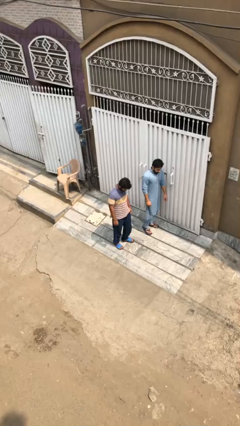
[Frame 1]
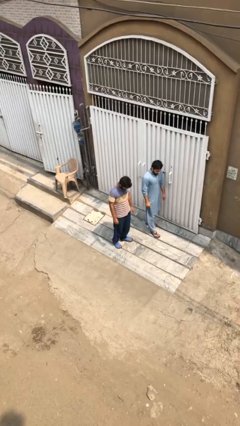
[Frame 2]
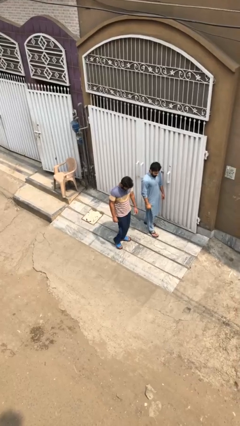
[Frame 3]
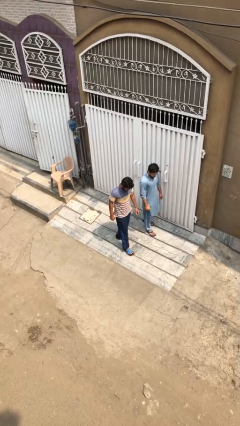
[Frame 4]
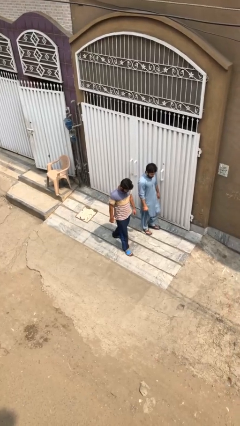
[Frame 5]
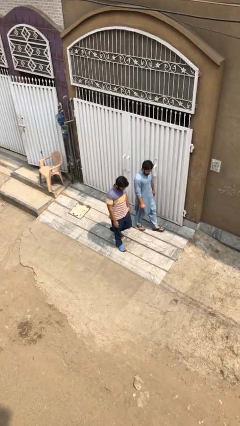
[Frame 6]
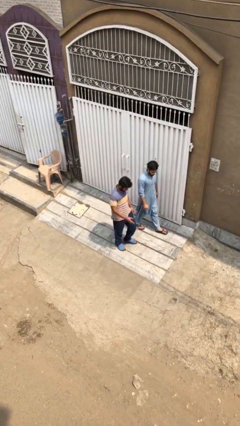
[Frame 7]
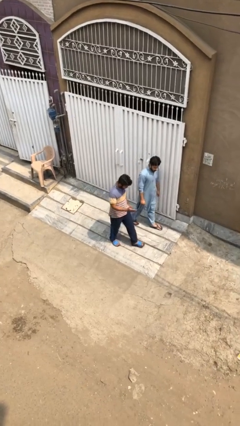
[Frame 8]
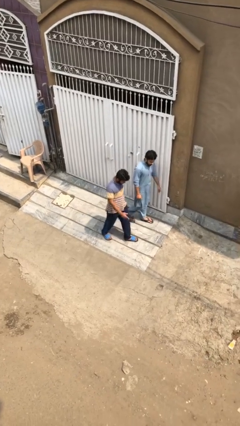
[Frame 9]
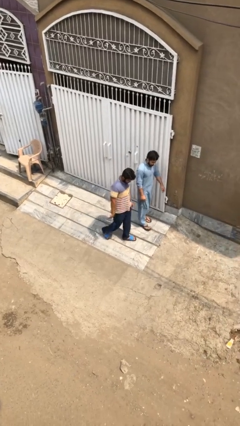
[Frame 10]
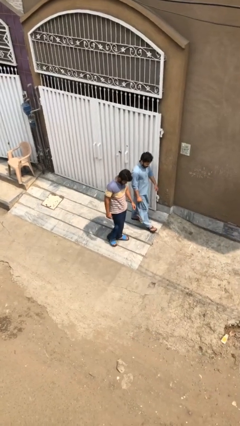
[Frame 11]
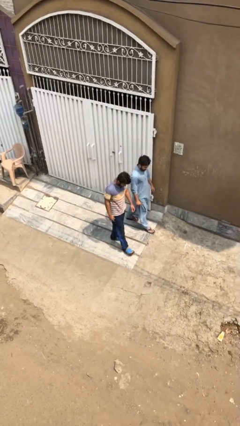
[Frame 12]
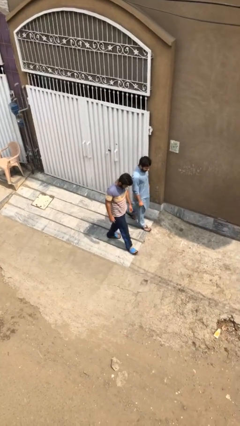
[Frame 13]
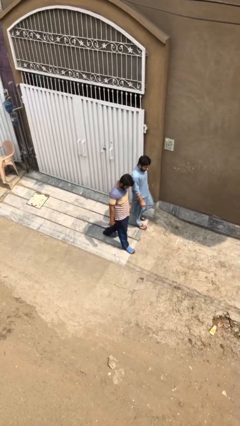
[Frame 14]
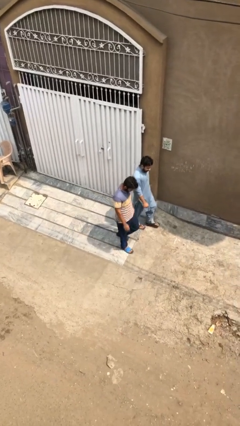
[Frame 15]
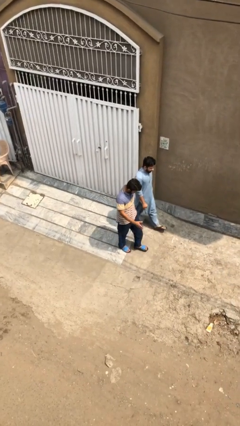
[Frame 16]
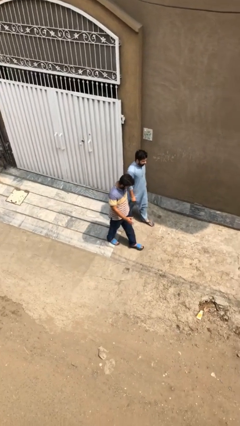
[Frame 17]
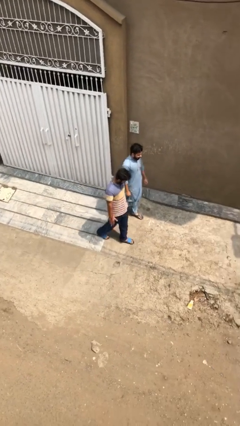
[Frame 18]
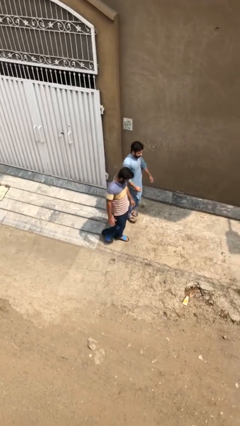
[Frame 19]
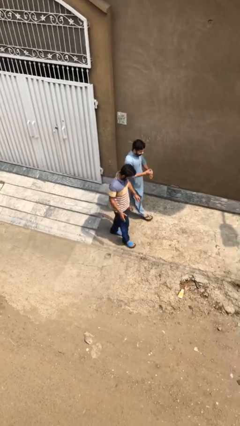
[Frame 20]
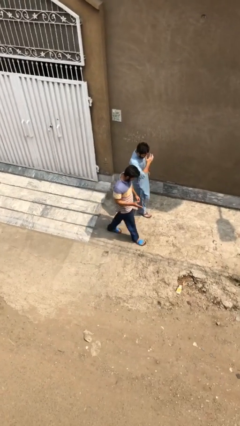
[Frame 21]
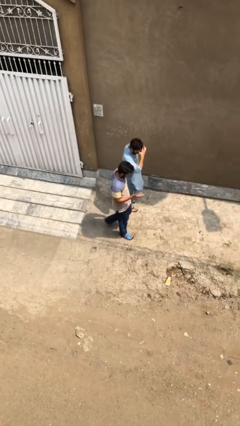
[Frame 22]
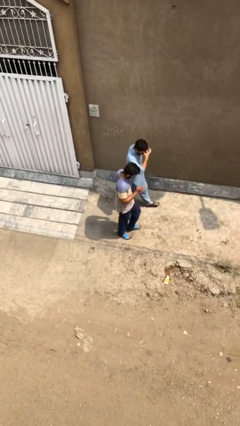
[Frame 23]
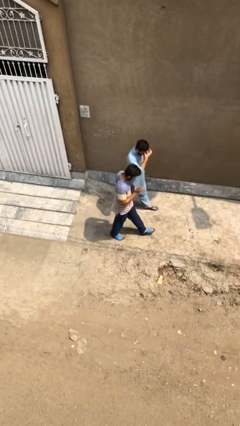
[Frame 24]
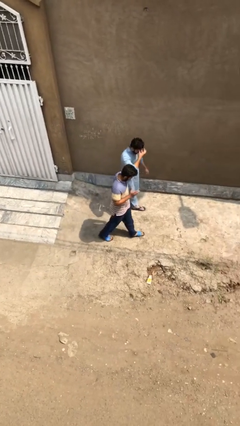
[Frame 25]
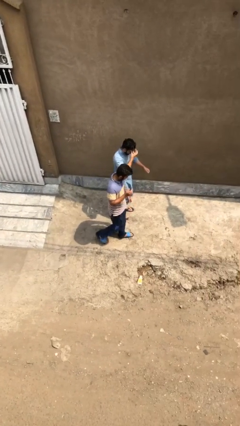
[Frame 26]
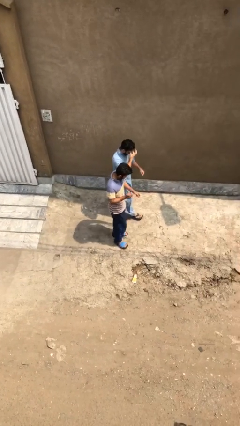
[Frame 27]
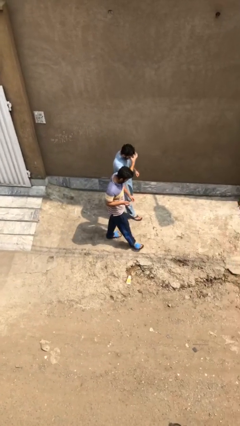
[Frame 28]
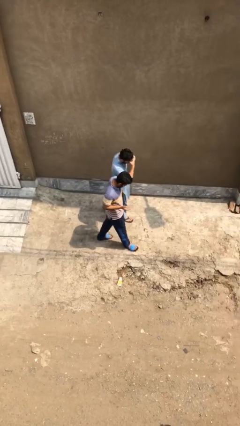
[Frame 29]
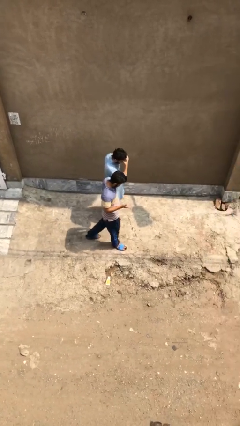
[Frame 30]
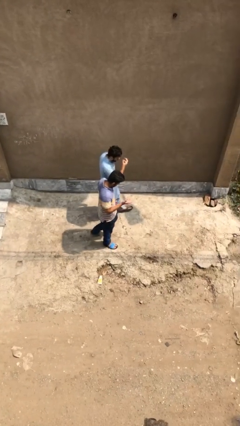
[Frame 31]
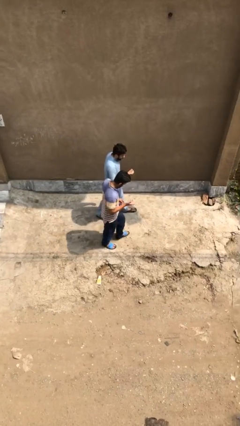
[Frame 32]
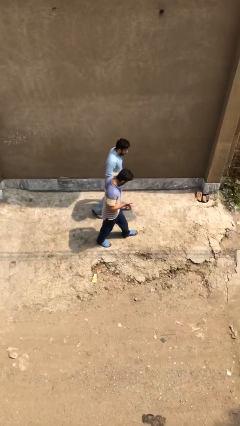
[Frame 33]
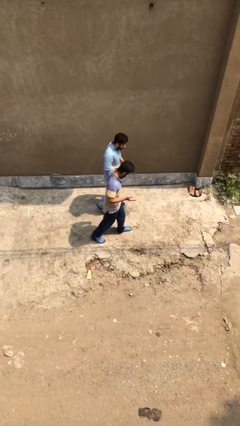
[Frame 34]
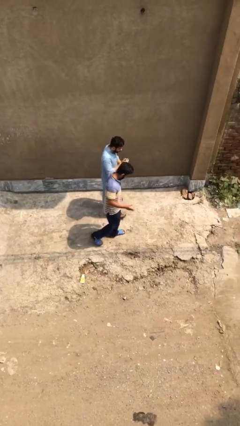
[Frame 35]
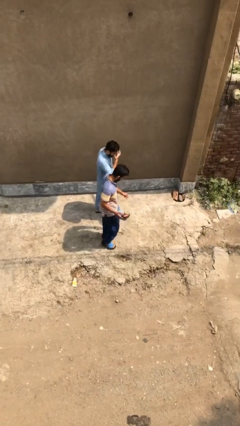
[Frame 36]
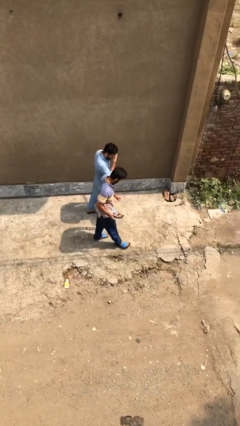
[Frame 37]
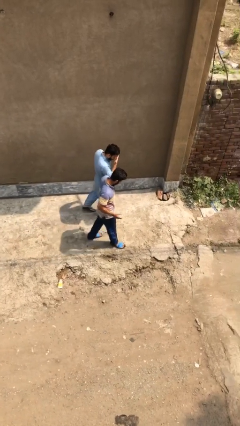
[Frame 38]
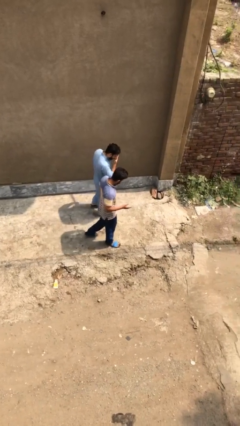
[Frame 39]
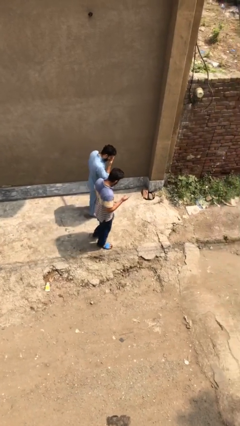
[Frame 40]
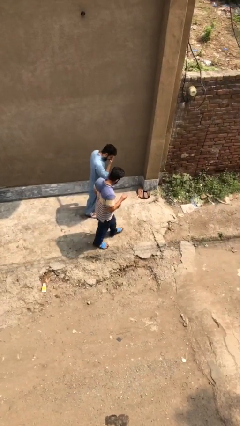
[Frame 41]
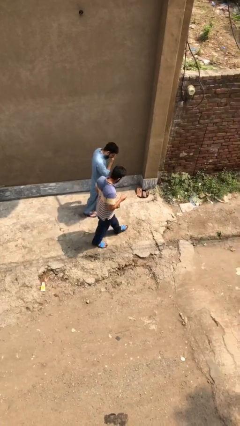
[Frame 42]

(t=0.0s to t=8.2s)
person talks to person

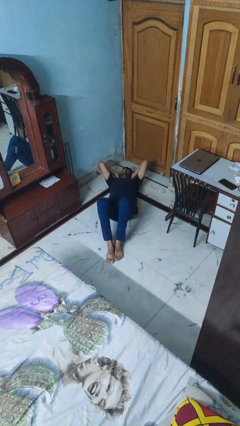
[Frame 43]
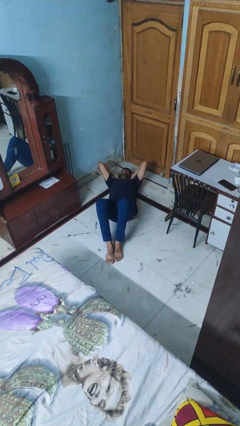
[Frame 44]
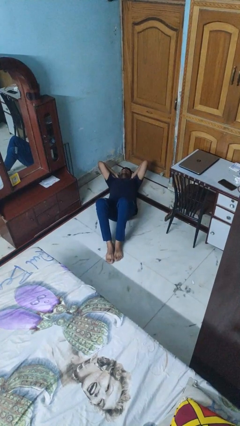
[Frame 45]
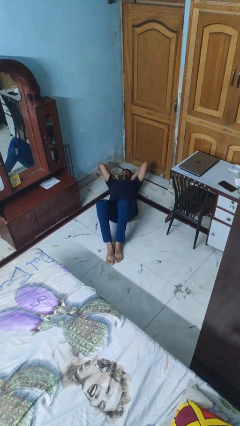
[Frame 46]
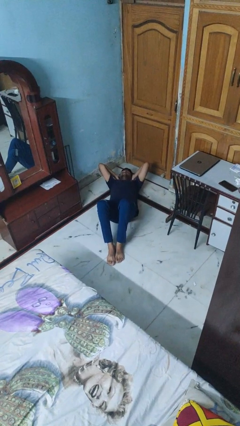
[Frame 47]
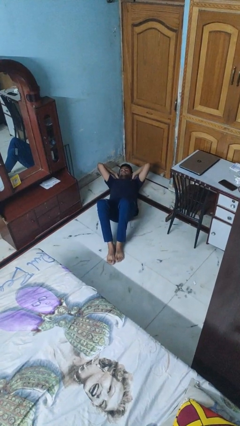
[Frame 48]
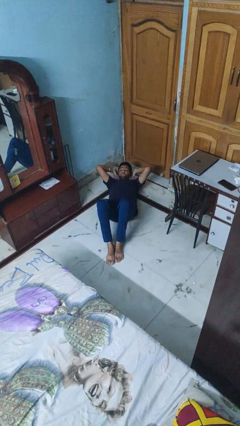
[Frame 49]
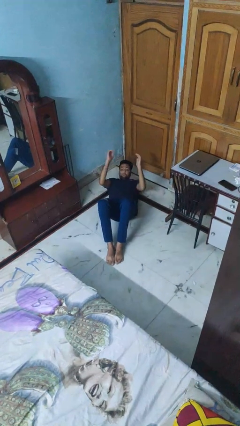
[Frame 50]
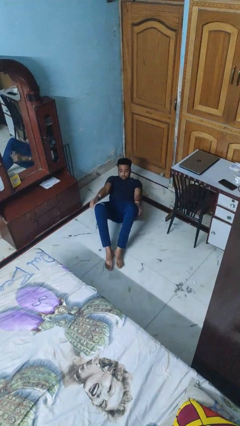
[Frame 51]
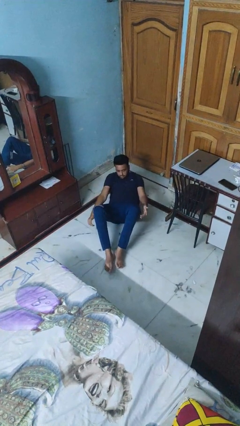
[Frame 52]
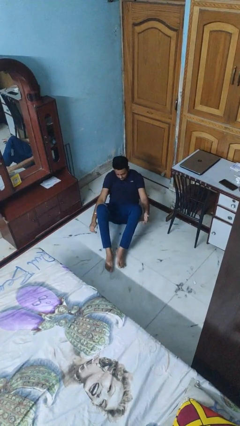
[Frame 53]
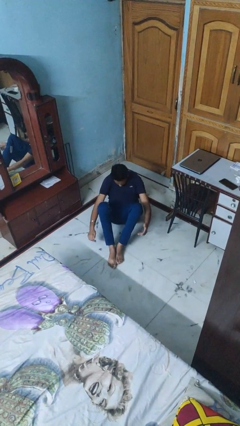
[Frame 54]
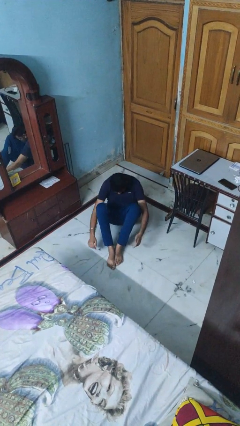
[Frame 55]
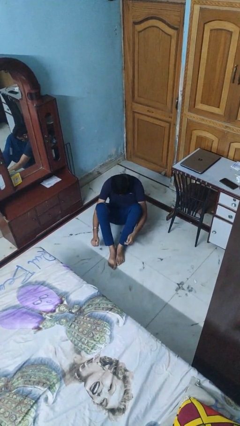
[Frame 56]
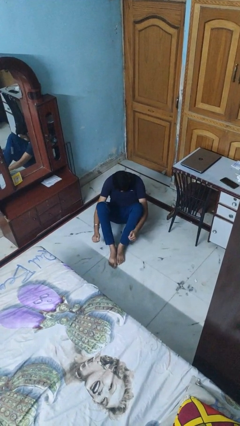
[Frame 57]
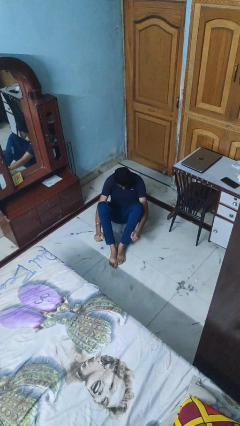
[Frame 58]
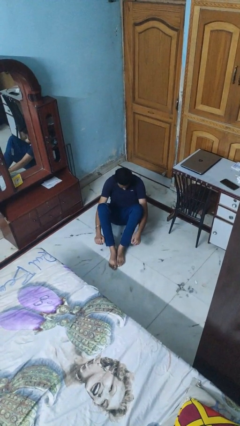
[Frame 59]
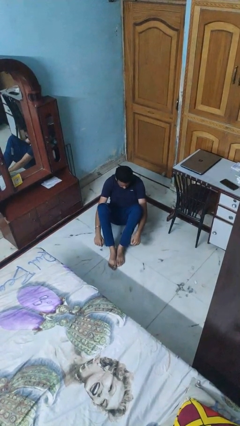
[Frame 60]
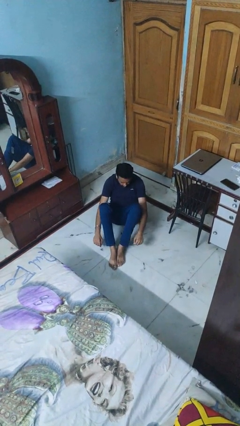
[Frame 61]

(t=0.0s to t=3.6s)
person exercises with situp

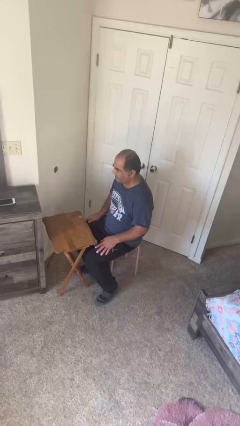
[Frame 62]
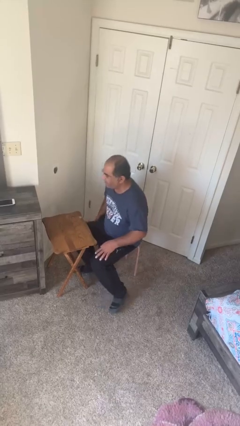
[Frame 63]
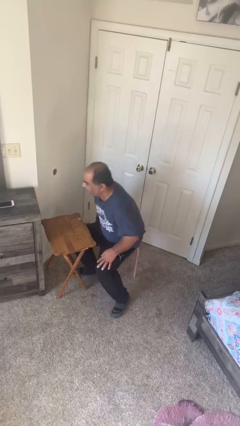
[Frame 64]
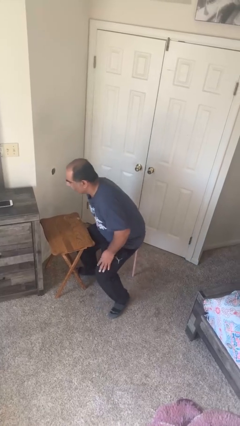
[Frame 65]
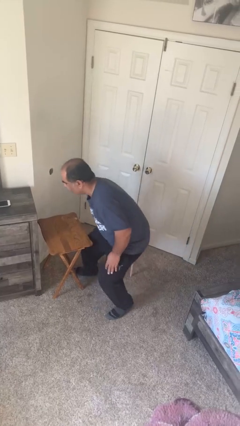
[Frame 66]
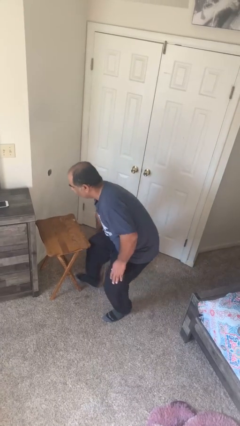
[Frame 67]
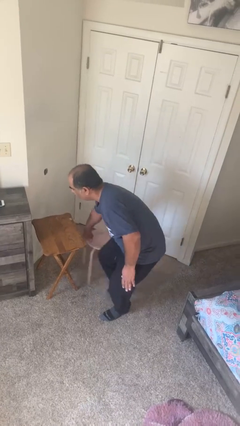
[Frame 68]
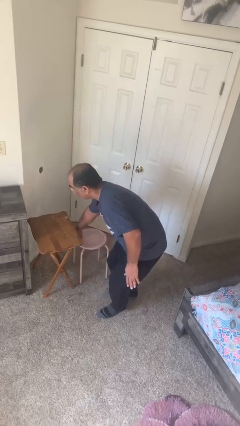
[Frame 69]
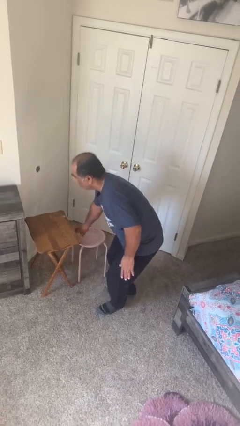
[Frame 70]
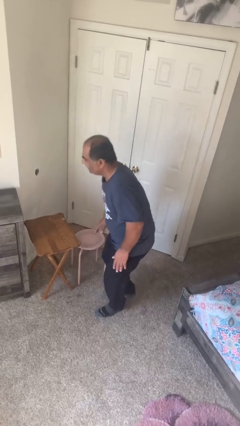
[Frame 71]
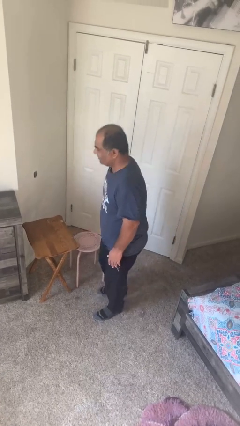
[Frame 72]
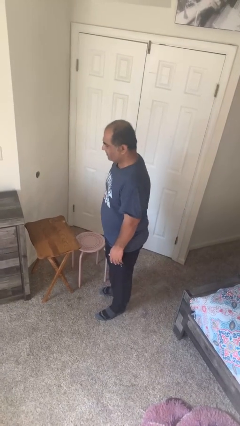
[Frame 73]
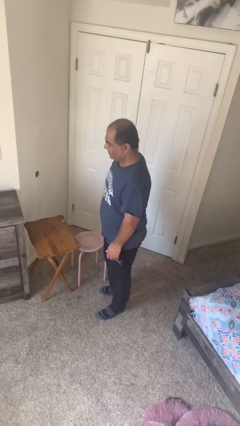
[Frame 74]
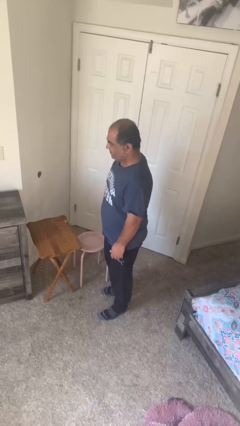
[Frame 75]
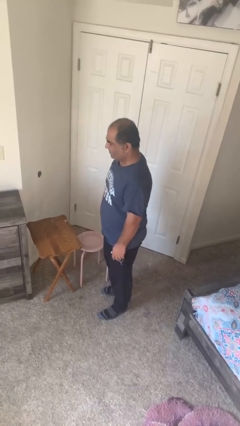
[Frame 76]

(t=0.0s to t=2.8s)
person stands up

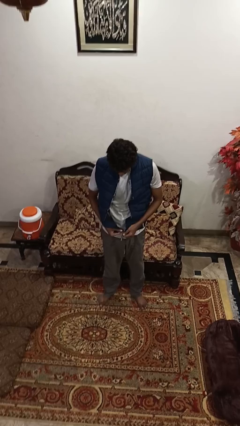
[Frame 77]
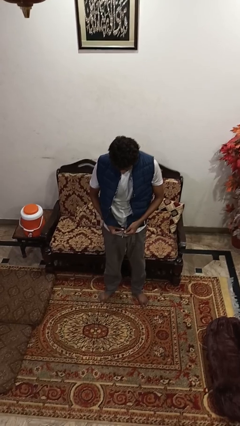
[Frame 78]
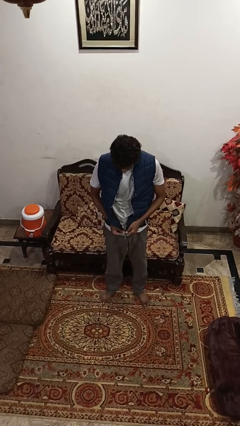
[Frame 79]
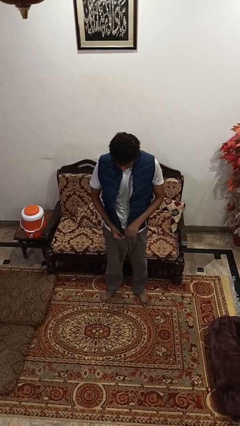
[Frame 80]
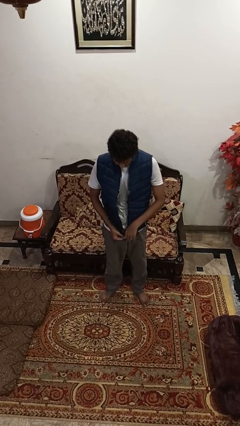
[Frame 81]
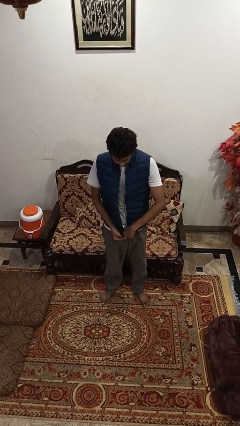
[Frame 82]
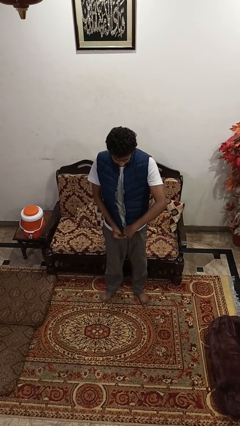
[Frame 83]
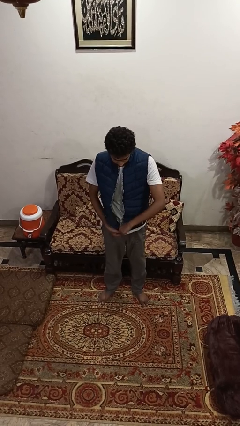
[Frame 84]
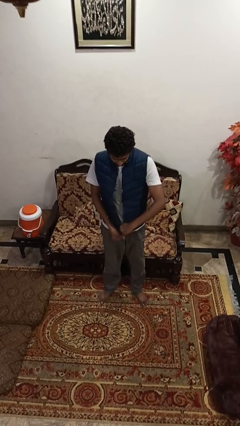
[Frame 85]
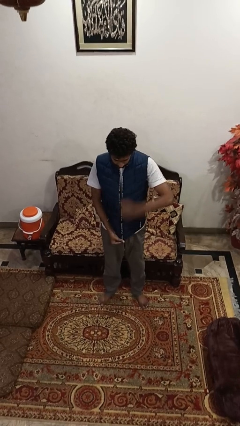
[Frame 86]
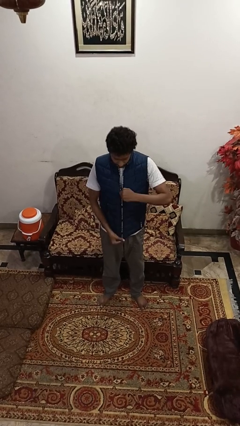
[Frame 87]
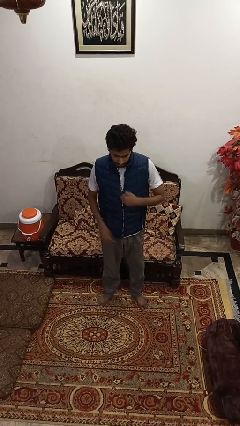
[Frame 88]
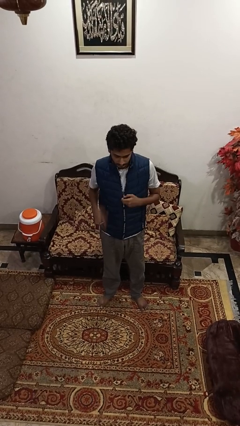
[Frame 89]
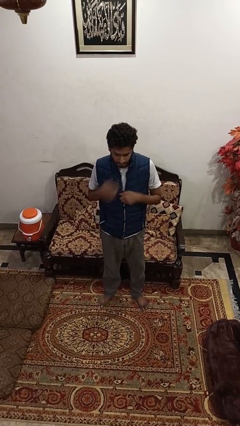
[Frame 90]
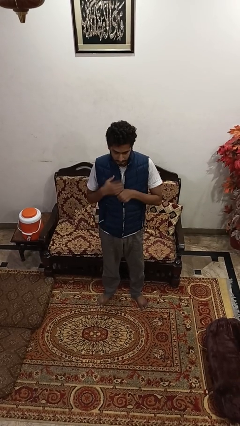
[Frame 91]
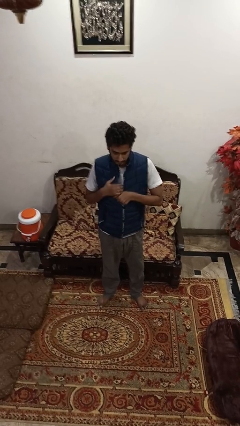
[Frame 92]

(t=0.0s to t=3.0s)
person zips up jacket
